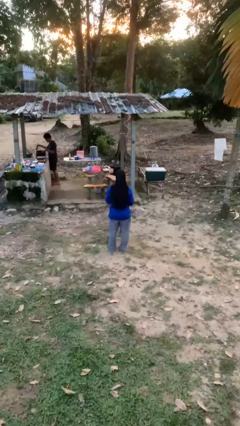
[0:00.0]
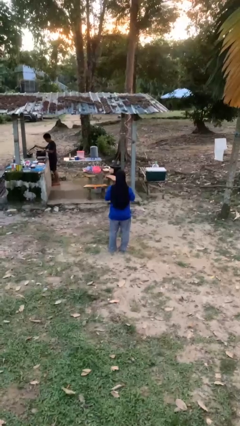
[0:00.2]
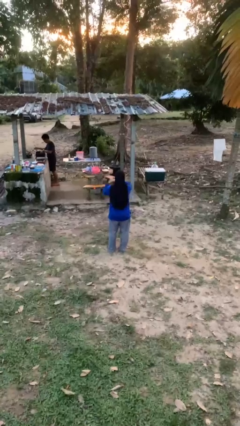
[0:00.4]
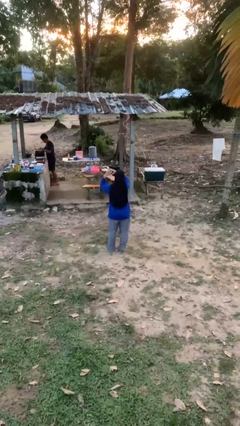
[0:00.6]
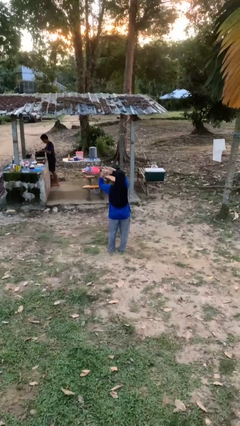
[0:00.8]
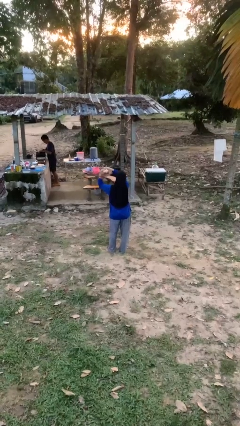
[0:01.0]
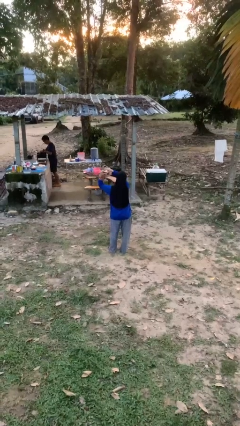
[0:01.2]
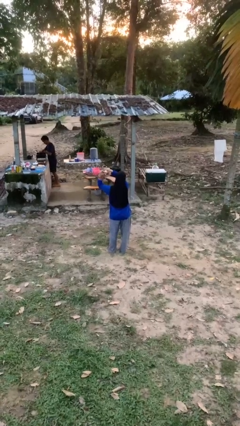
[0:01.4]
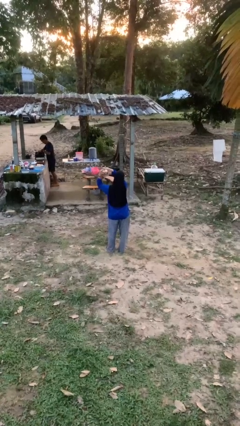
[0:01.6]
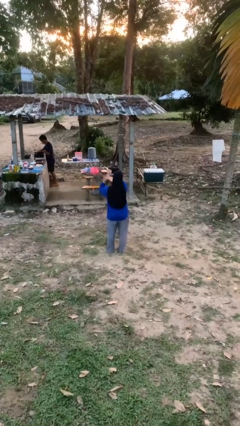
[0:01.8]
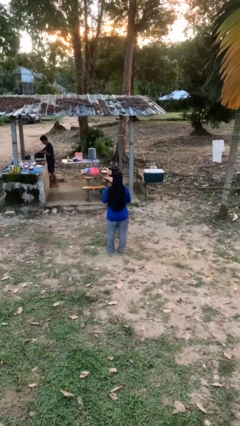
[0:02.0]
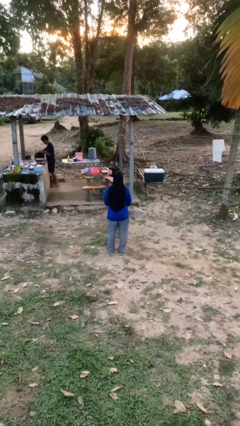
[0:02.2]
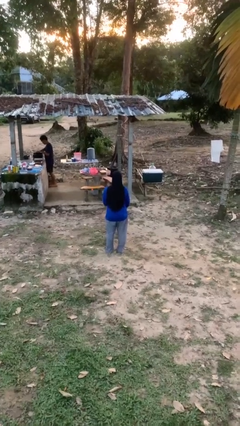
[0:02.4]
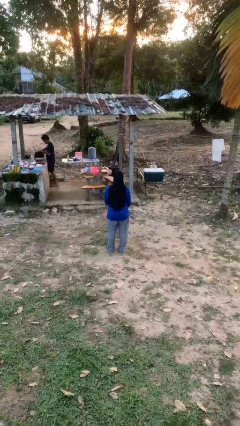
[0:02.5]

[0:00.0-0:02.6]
person gestures heart

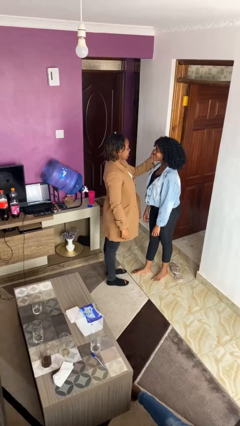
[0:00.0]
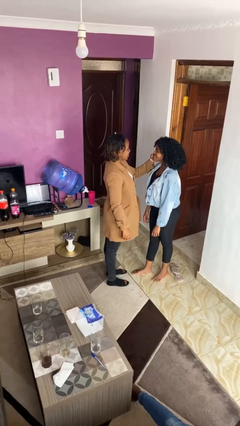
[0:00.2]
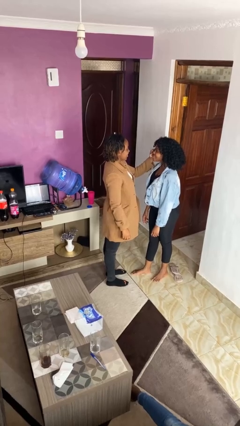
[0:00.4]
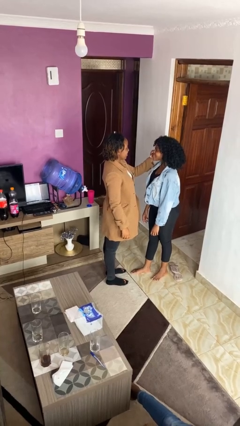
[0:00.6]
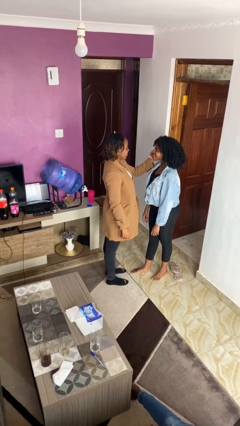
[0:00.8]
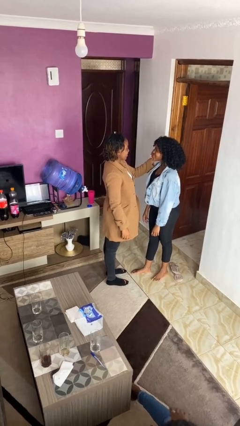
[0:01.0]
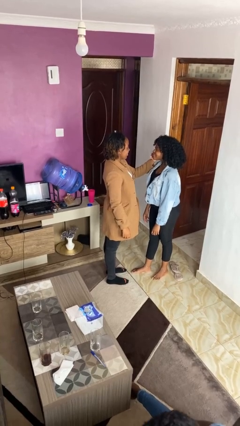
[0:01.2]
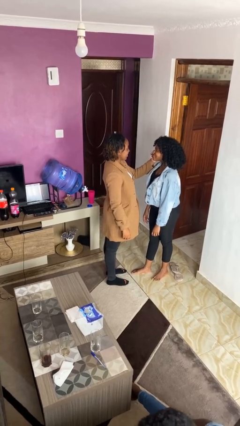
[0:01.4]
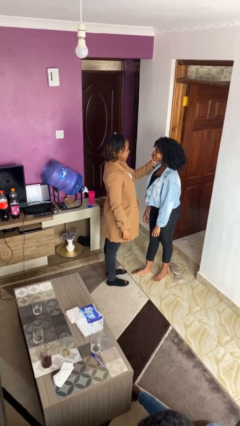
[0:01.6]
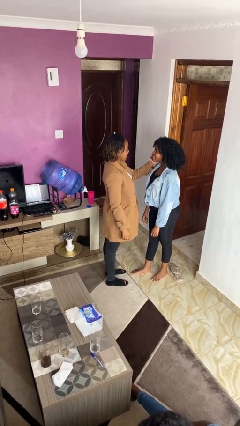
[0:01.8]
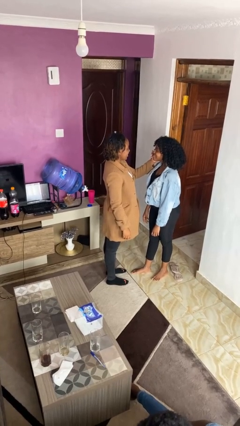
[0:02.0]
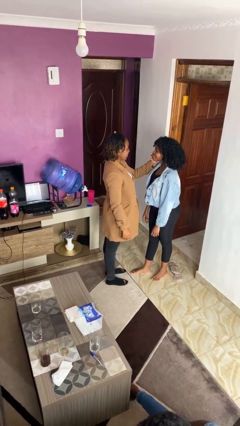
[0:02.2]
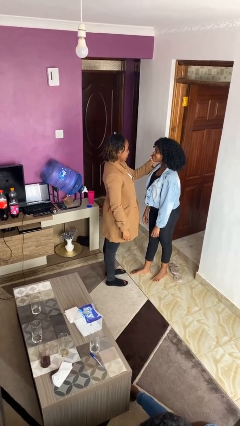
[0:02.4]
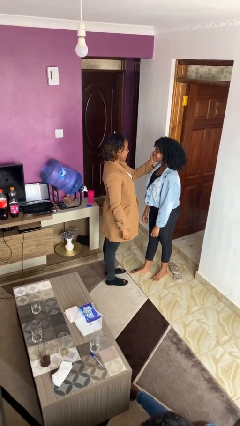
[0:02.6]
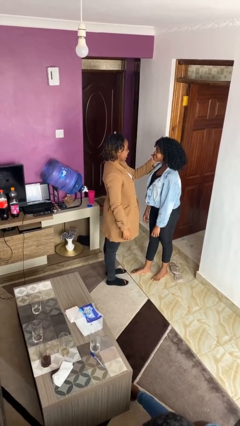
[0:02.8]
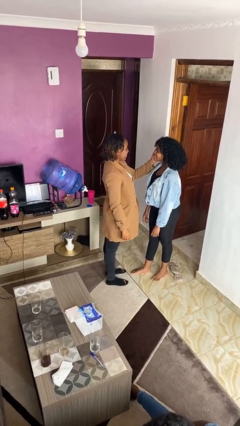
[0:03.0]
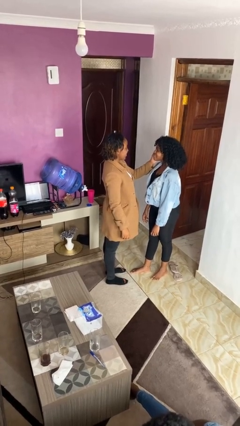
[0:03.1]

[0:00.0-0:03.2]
person touches face of person

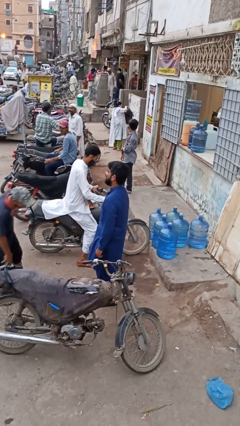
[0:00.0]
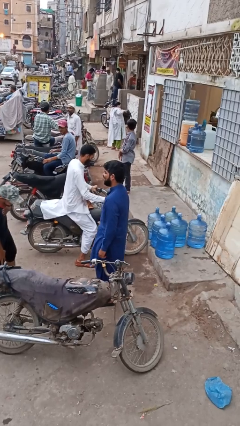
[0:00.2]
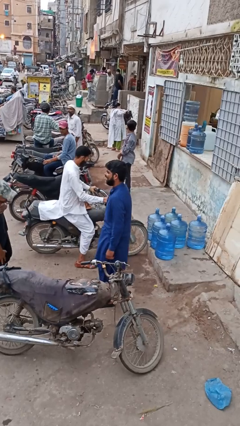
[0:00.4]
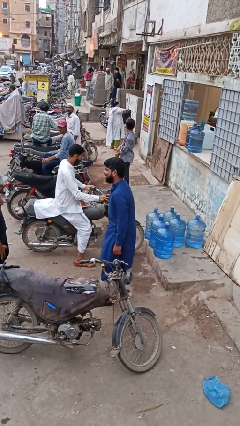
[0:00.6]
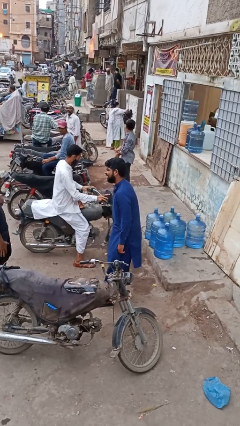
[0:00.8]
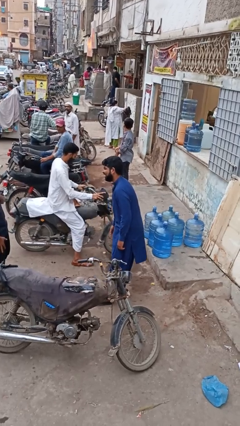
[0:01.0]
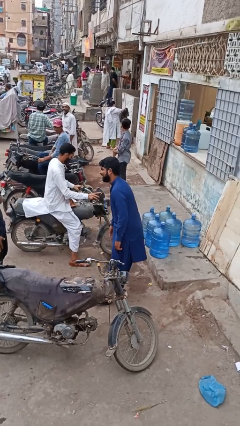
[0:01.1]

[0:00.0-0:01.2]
person laughs with person

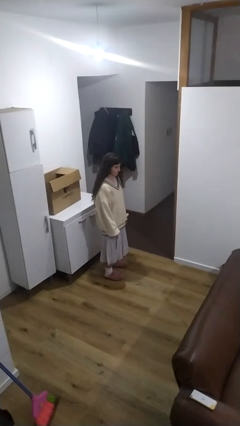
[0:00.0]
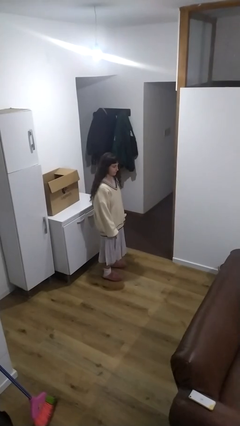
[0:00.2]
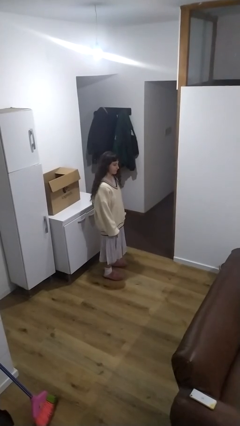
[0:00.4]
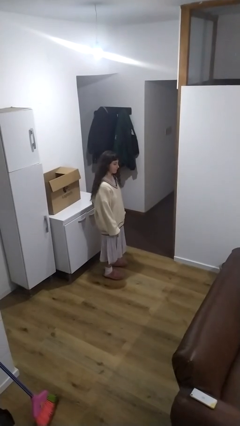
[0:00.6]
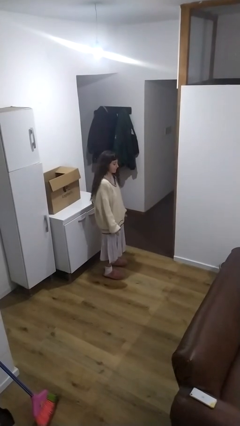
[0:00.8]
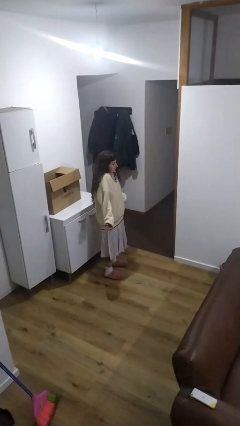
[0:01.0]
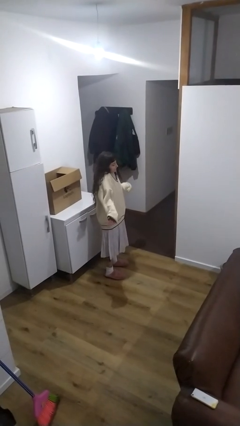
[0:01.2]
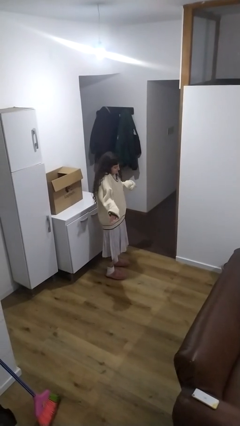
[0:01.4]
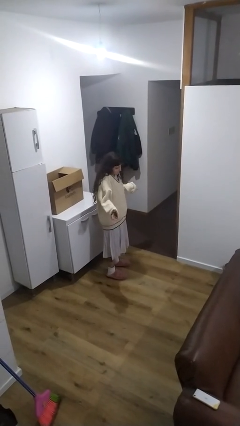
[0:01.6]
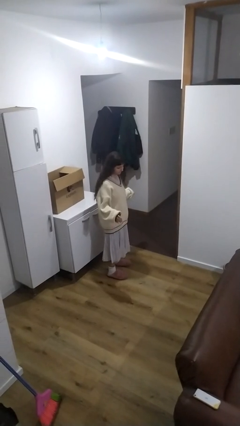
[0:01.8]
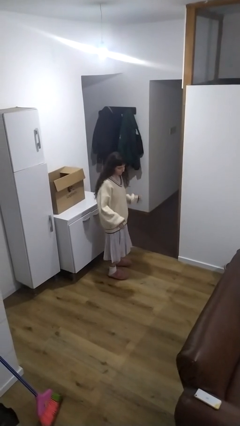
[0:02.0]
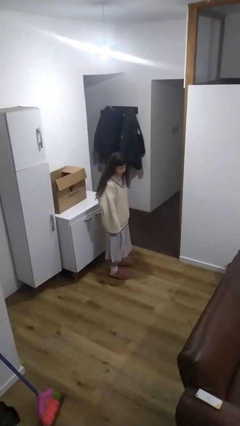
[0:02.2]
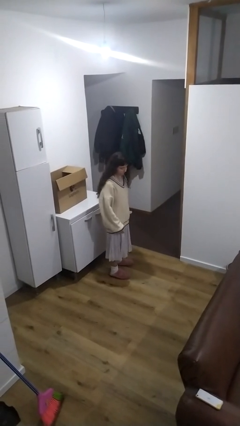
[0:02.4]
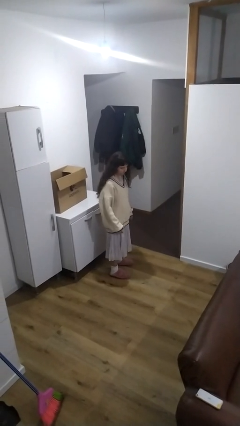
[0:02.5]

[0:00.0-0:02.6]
person shrugs

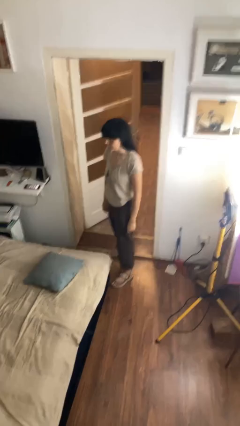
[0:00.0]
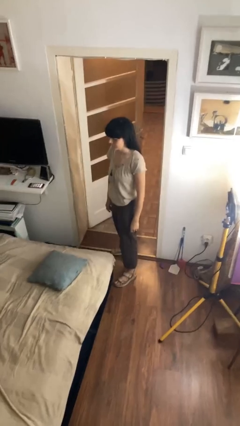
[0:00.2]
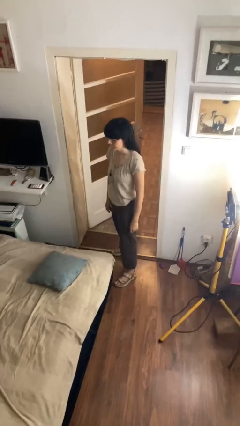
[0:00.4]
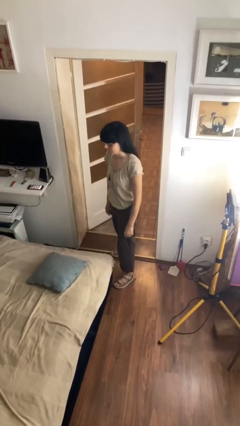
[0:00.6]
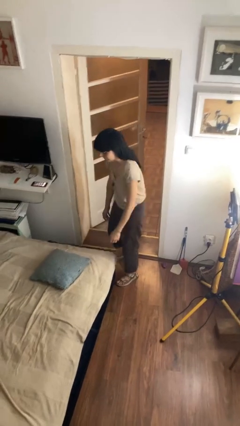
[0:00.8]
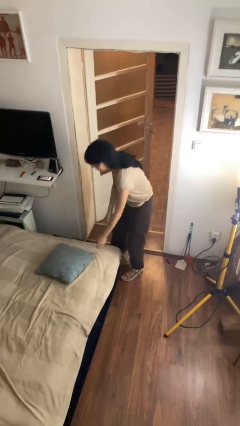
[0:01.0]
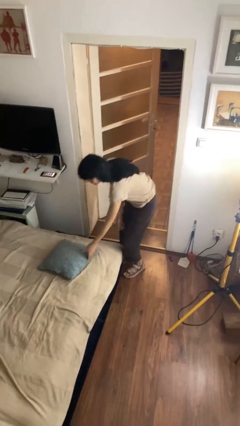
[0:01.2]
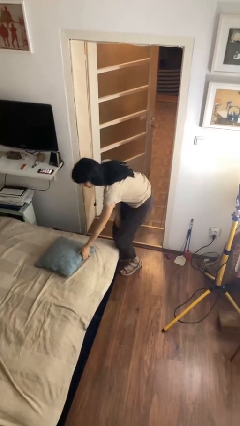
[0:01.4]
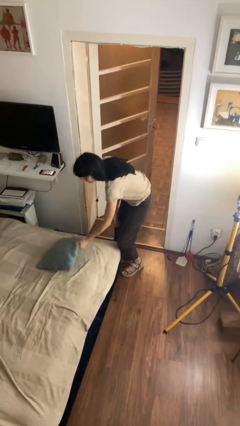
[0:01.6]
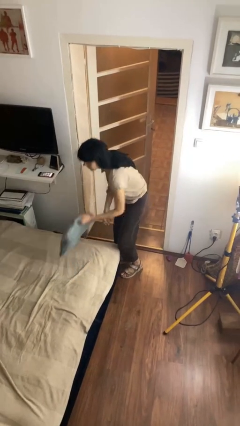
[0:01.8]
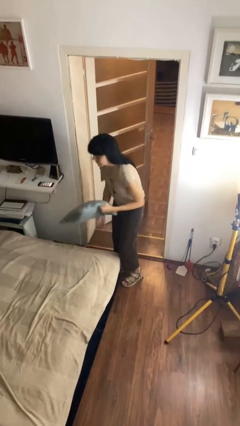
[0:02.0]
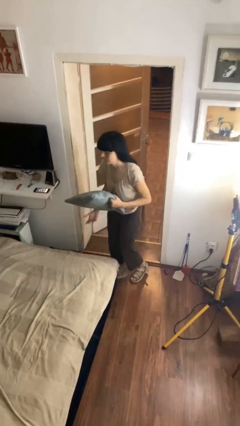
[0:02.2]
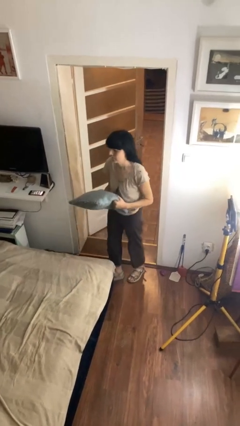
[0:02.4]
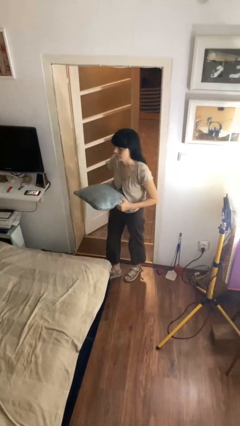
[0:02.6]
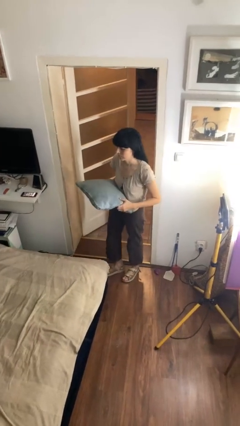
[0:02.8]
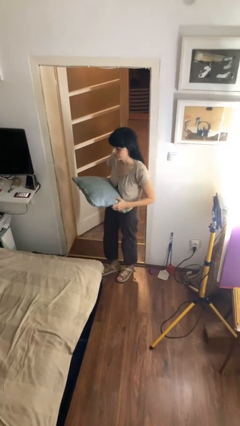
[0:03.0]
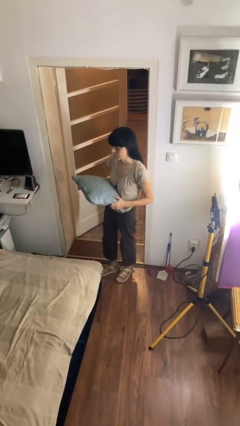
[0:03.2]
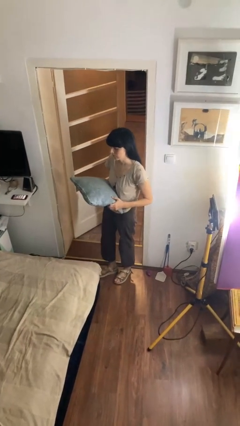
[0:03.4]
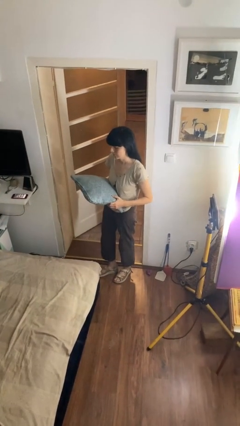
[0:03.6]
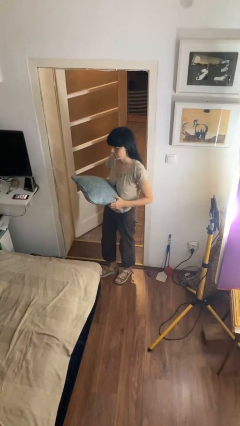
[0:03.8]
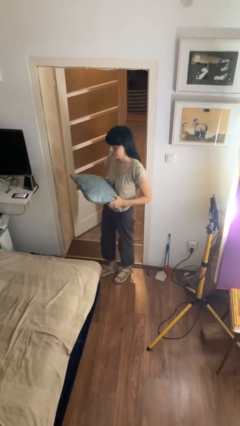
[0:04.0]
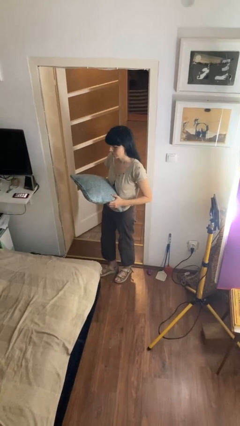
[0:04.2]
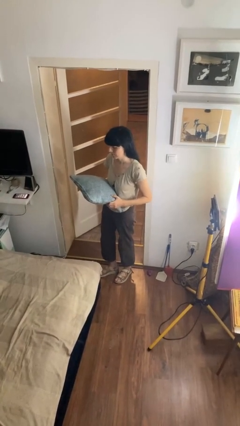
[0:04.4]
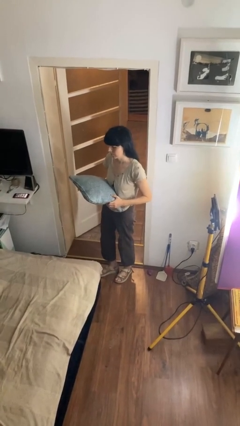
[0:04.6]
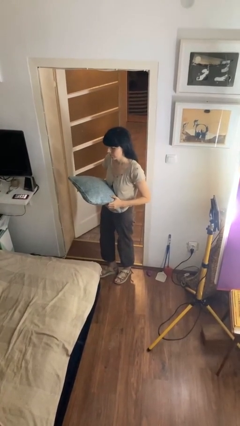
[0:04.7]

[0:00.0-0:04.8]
person picks up object from bed

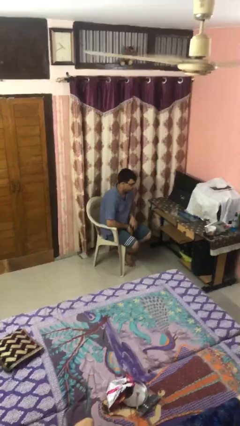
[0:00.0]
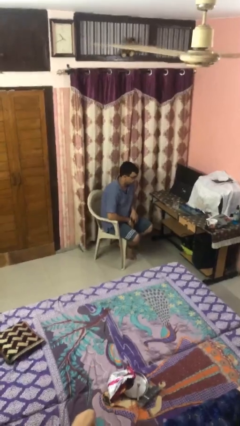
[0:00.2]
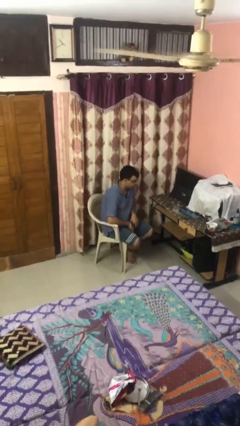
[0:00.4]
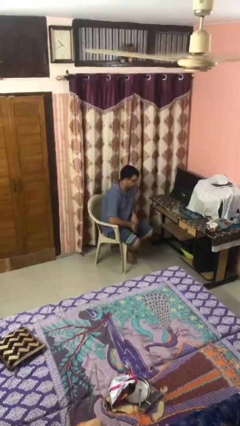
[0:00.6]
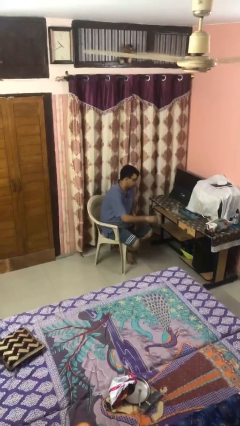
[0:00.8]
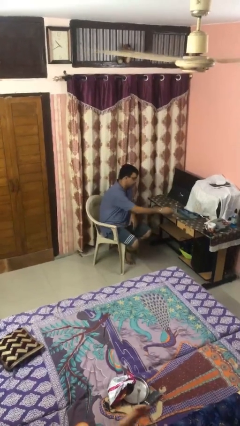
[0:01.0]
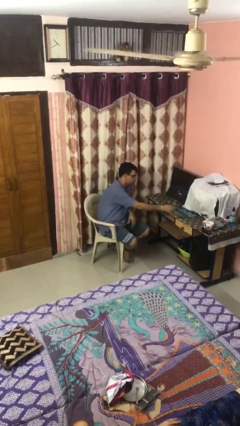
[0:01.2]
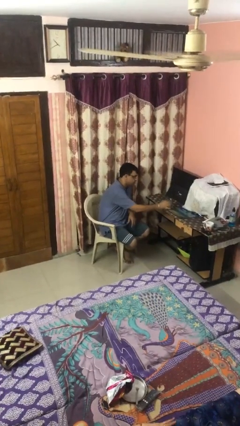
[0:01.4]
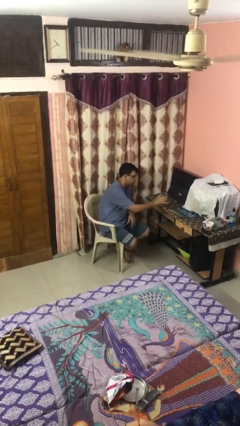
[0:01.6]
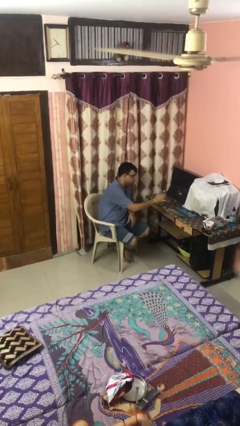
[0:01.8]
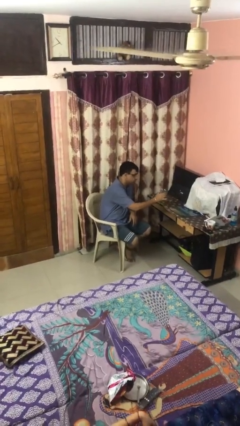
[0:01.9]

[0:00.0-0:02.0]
person picks up object from table

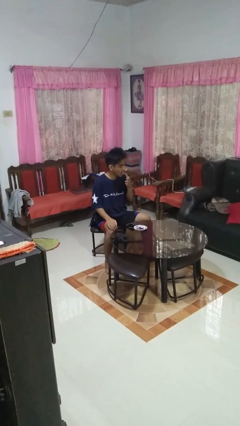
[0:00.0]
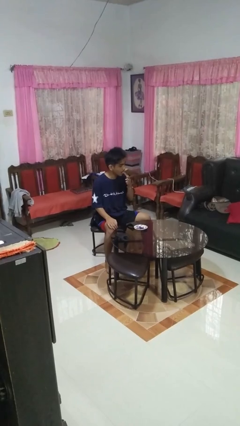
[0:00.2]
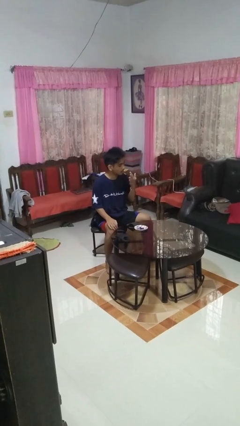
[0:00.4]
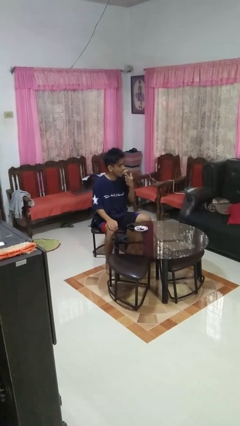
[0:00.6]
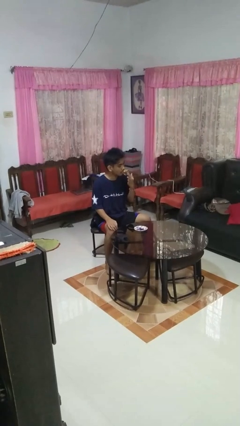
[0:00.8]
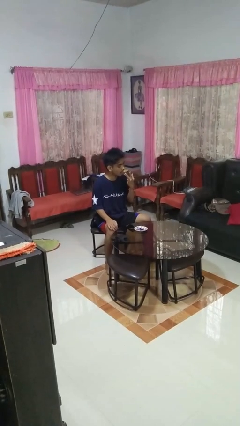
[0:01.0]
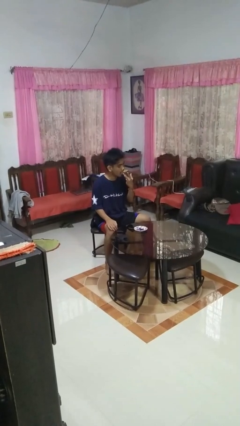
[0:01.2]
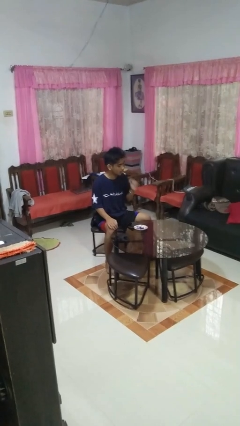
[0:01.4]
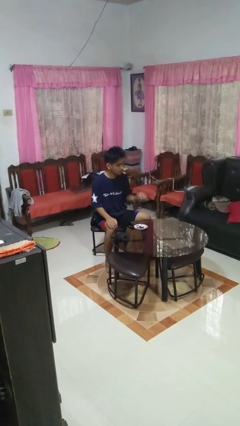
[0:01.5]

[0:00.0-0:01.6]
person licks fingers
